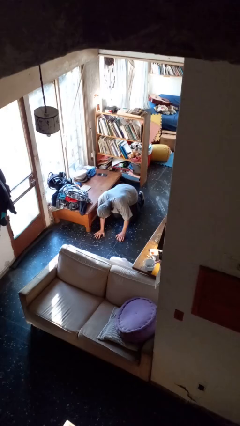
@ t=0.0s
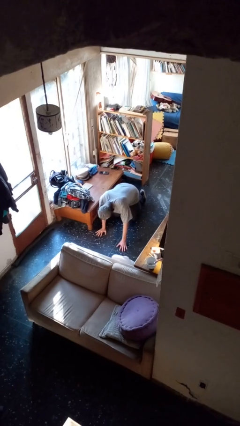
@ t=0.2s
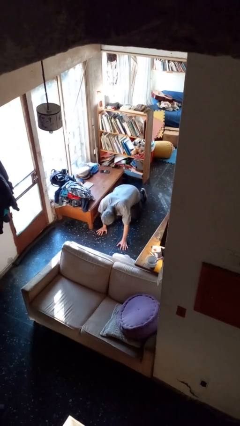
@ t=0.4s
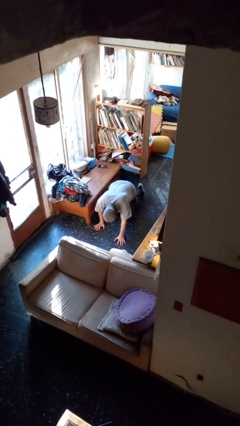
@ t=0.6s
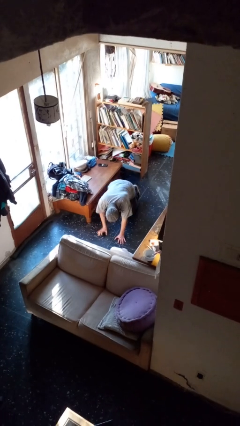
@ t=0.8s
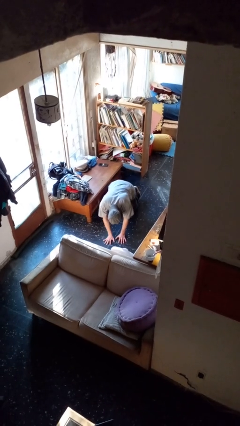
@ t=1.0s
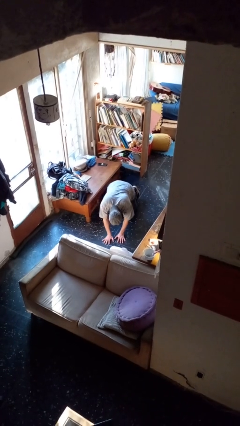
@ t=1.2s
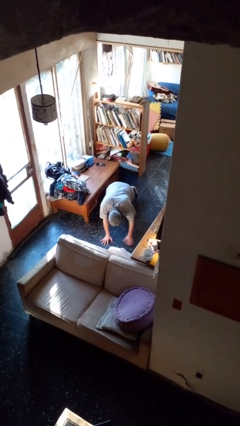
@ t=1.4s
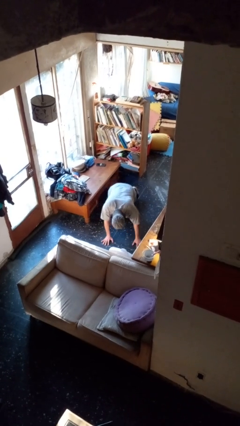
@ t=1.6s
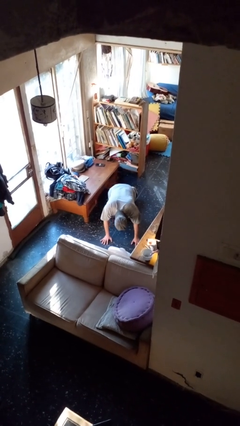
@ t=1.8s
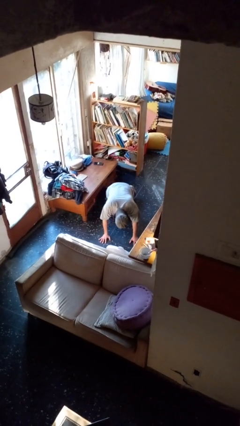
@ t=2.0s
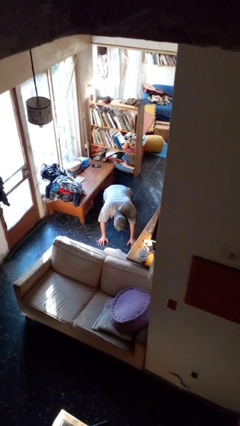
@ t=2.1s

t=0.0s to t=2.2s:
person crawls

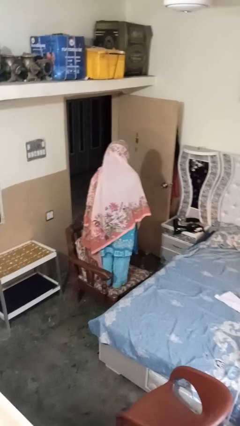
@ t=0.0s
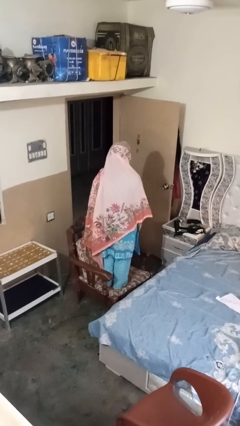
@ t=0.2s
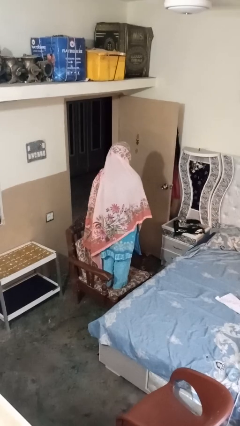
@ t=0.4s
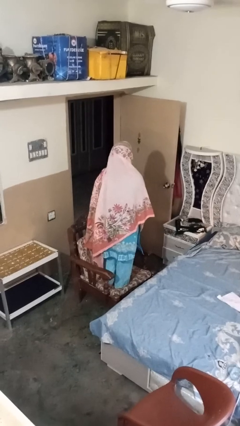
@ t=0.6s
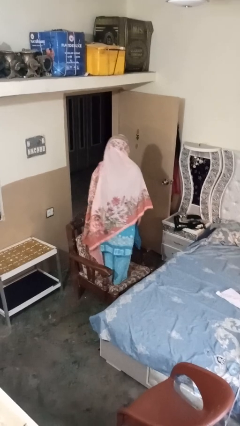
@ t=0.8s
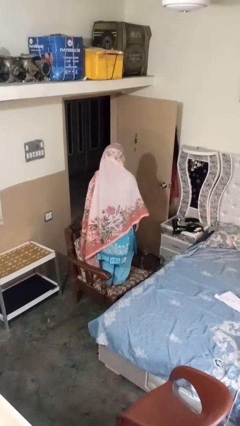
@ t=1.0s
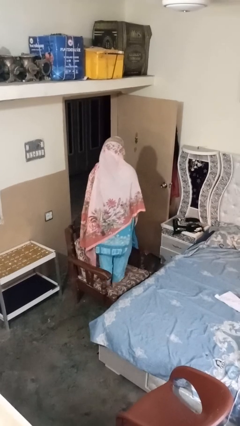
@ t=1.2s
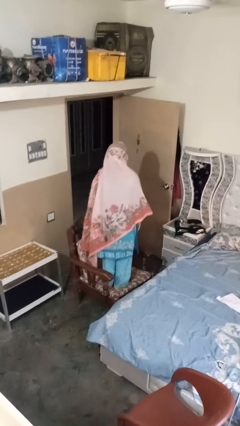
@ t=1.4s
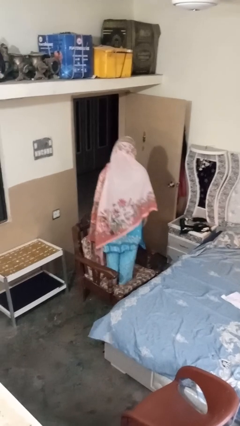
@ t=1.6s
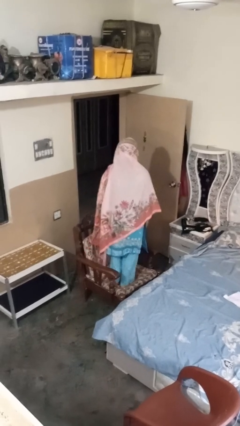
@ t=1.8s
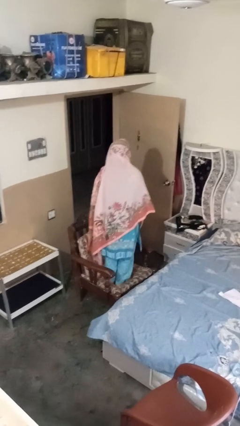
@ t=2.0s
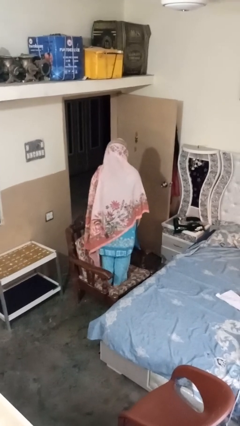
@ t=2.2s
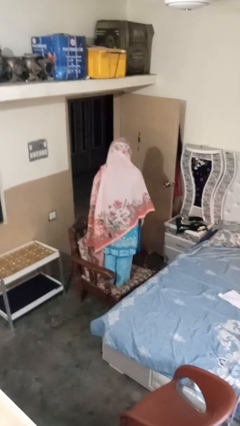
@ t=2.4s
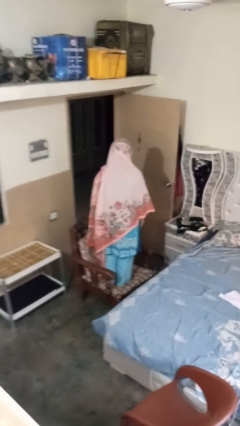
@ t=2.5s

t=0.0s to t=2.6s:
person jumps on couch

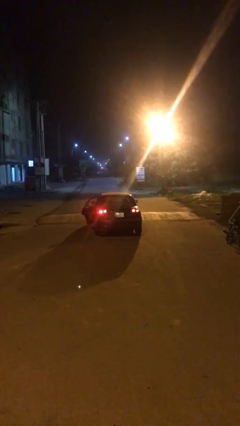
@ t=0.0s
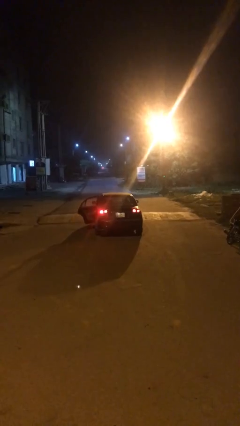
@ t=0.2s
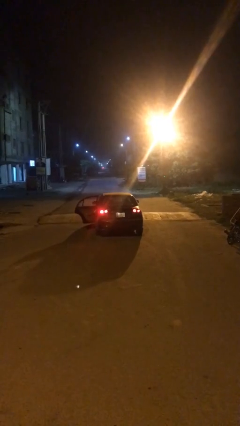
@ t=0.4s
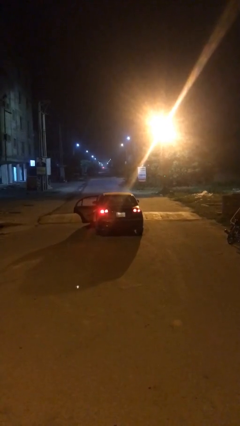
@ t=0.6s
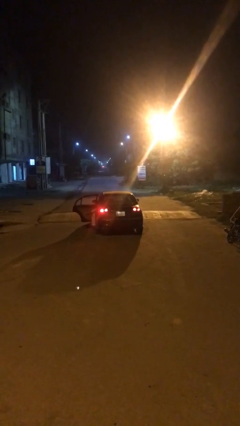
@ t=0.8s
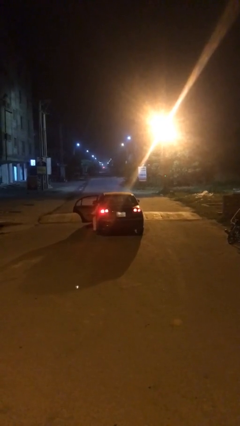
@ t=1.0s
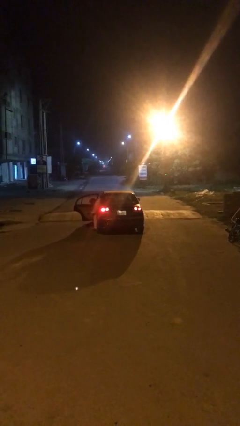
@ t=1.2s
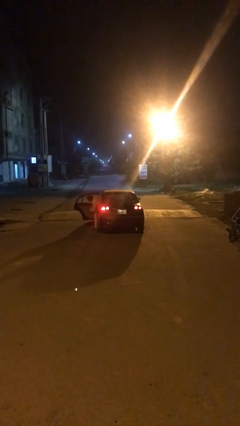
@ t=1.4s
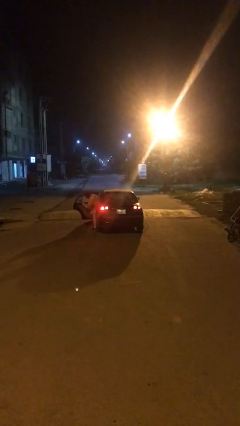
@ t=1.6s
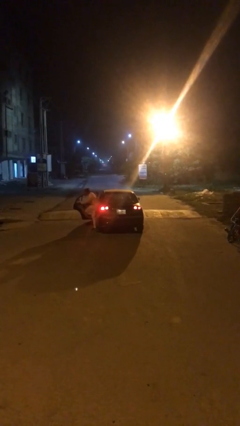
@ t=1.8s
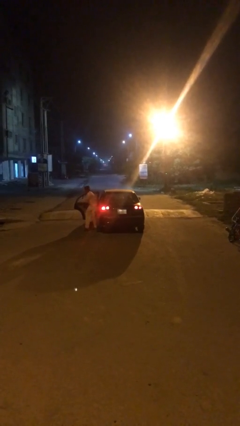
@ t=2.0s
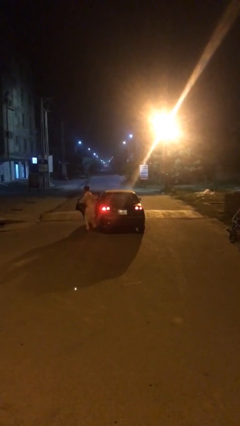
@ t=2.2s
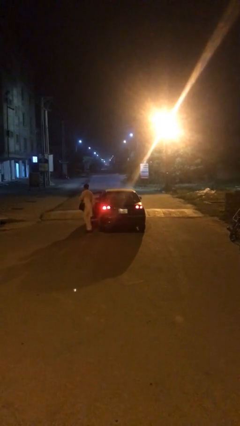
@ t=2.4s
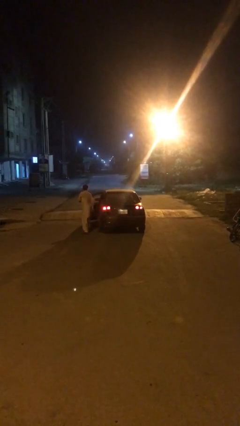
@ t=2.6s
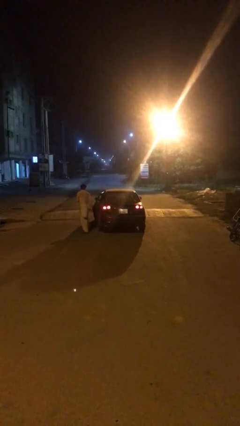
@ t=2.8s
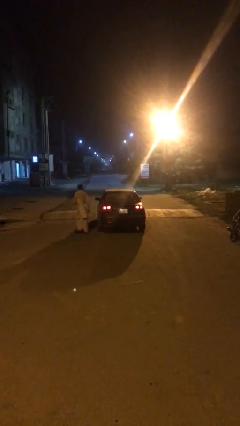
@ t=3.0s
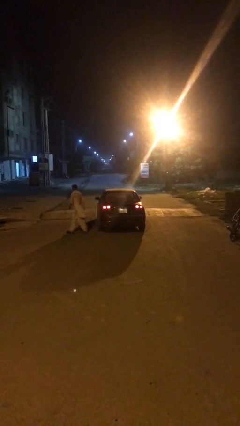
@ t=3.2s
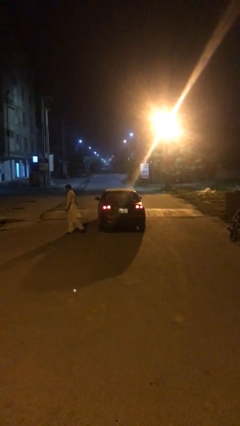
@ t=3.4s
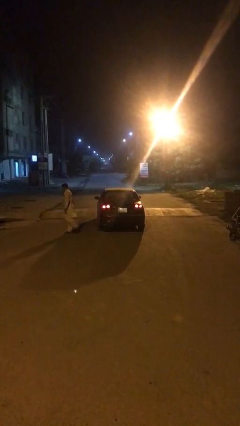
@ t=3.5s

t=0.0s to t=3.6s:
car drops off person

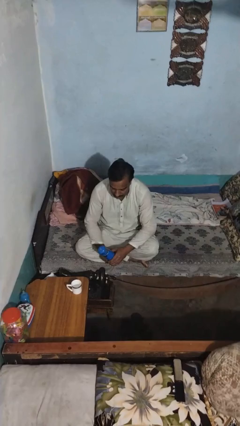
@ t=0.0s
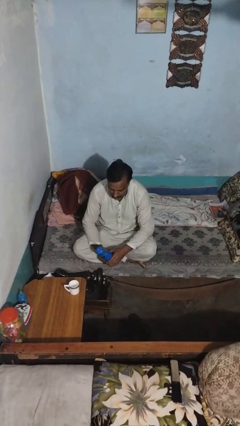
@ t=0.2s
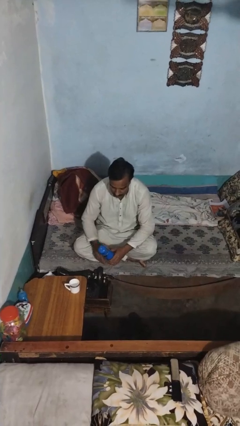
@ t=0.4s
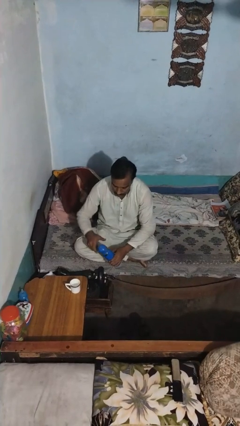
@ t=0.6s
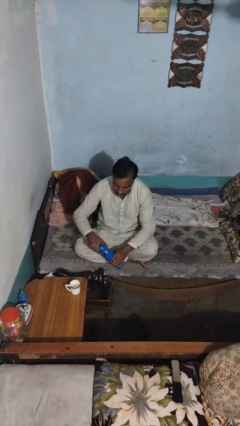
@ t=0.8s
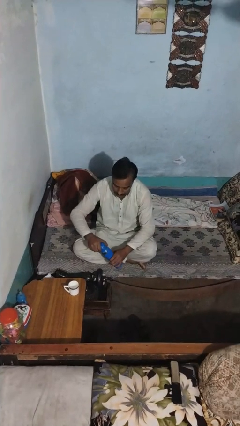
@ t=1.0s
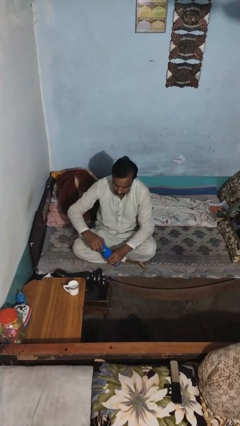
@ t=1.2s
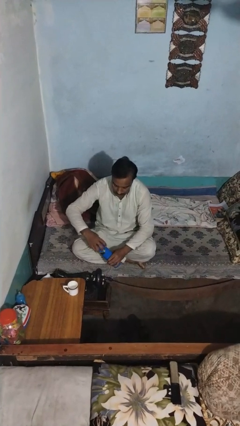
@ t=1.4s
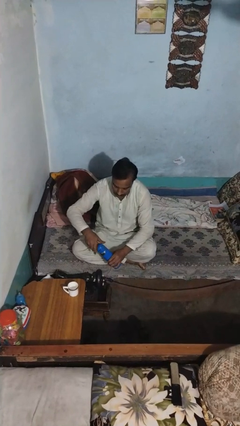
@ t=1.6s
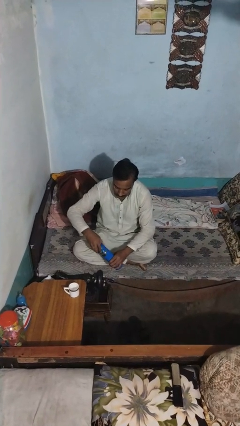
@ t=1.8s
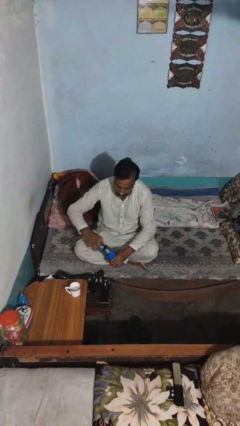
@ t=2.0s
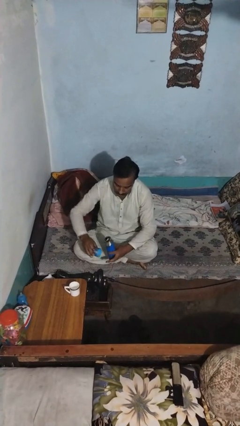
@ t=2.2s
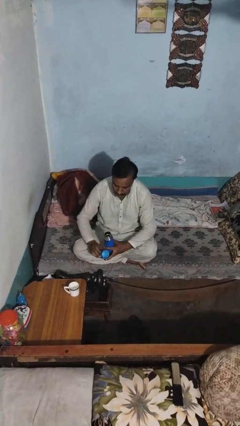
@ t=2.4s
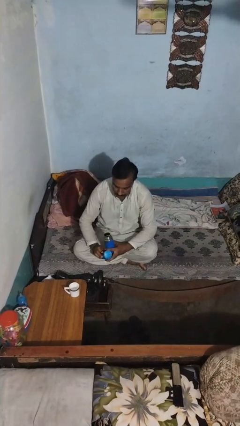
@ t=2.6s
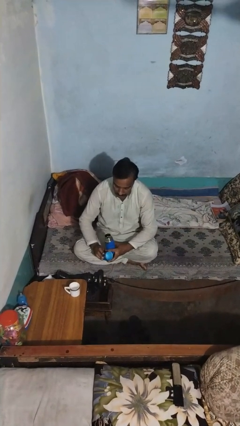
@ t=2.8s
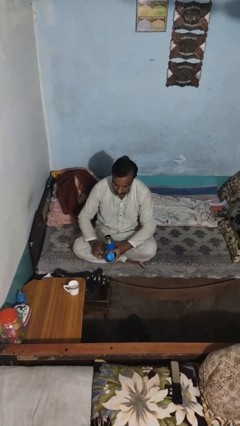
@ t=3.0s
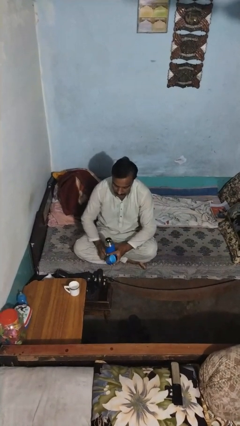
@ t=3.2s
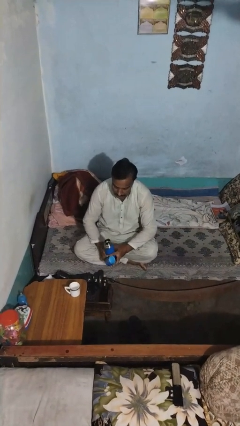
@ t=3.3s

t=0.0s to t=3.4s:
person unscrews lid from bottle

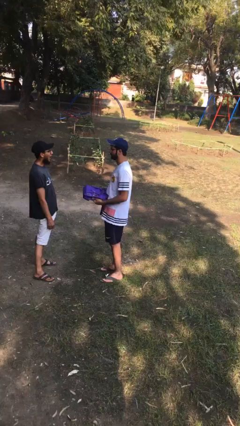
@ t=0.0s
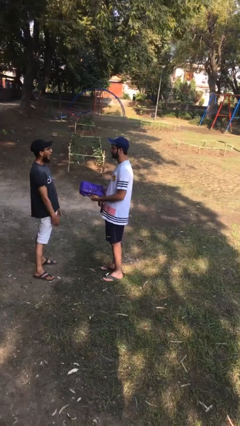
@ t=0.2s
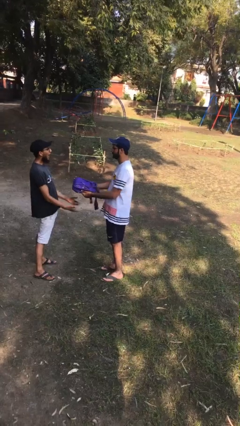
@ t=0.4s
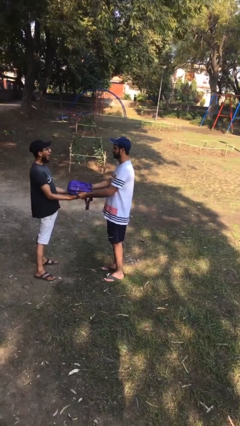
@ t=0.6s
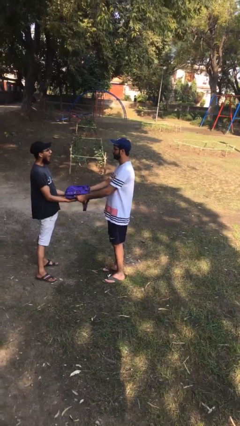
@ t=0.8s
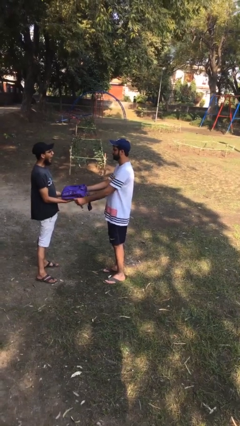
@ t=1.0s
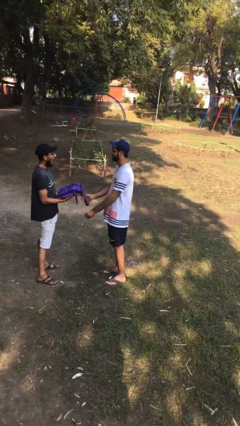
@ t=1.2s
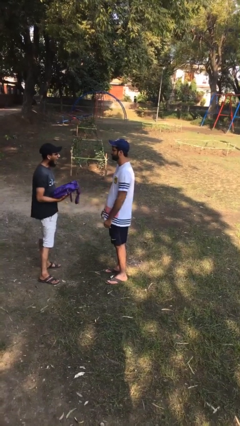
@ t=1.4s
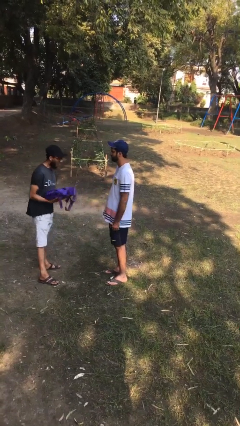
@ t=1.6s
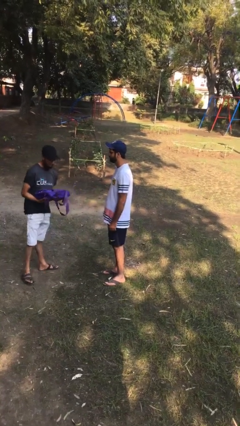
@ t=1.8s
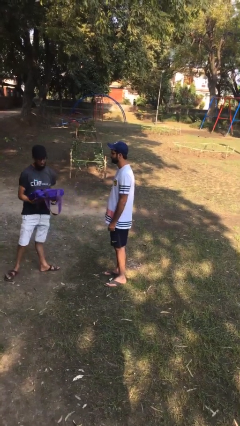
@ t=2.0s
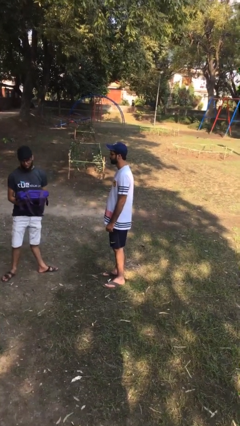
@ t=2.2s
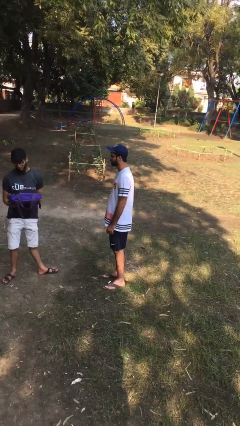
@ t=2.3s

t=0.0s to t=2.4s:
person transfers object to person

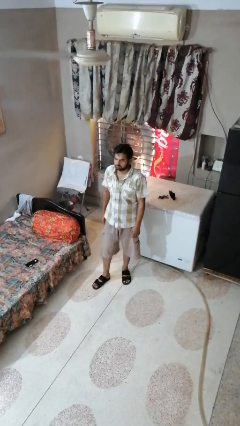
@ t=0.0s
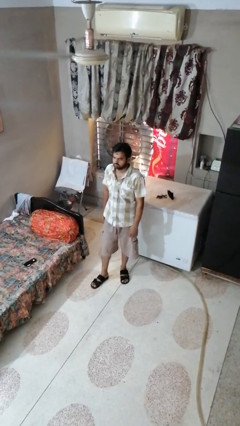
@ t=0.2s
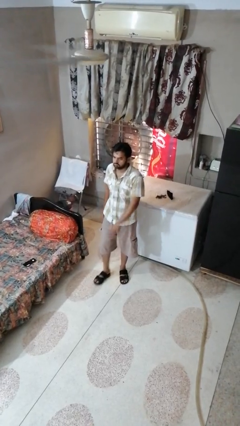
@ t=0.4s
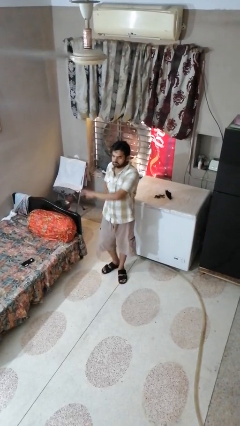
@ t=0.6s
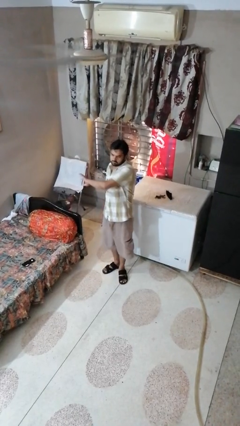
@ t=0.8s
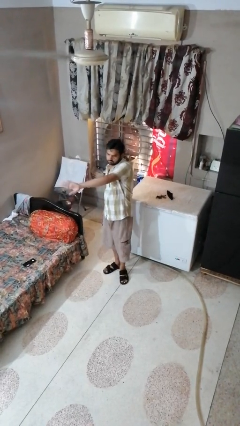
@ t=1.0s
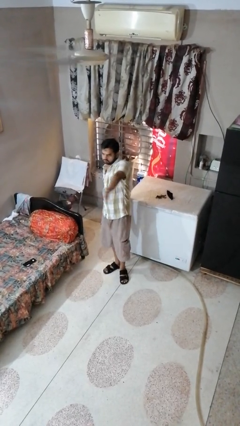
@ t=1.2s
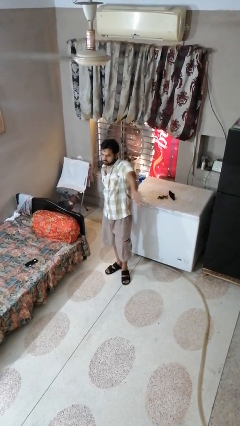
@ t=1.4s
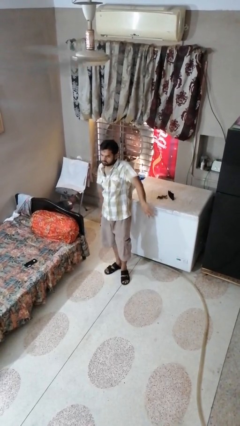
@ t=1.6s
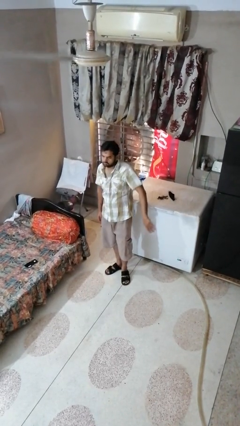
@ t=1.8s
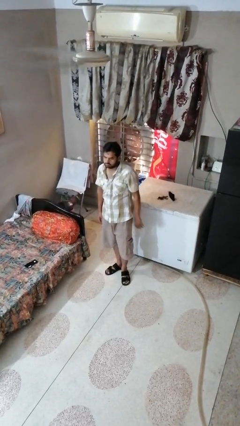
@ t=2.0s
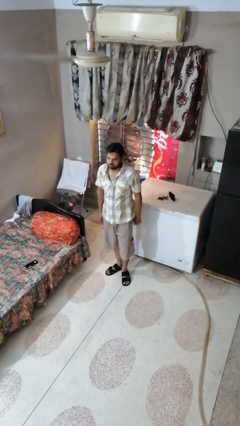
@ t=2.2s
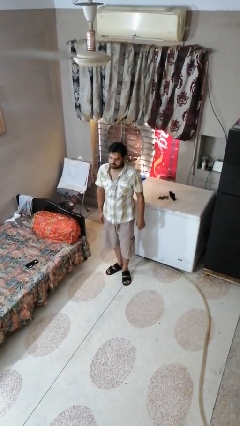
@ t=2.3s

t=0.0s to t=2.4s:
person gestures swipe left

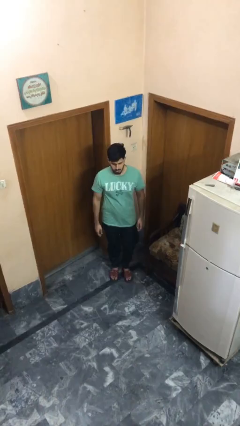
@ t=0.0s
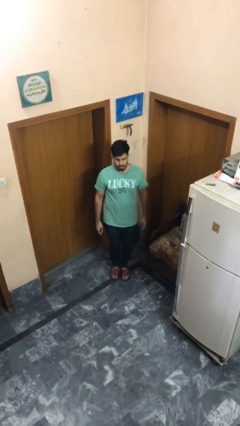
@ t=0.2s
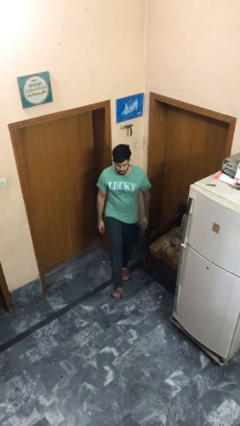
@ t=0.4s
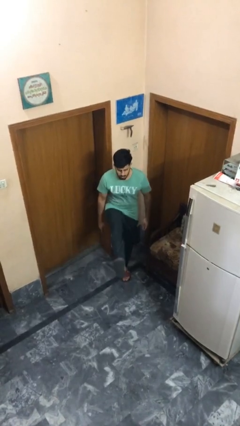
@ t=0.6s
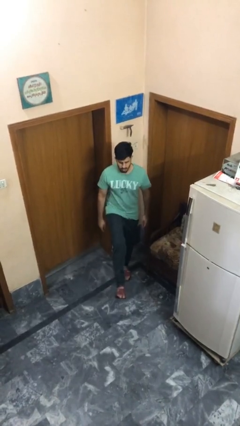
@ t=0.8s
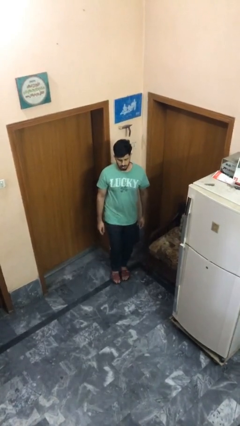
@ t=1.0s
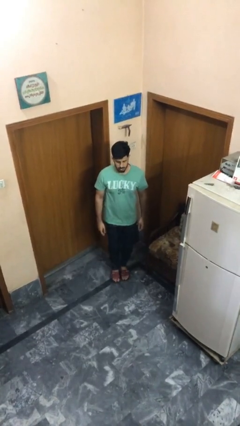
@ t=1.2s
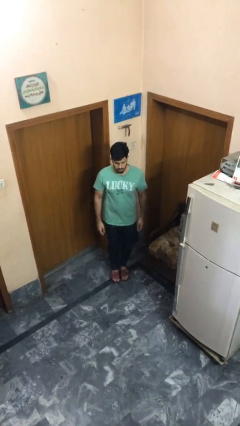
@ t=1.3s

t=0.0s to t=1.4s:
person karate kicks
